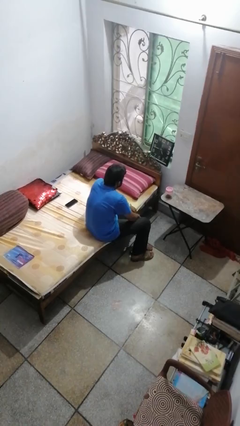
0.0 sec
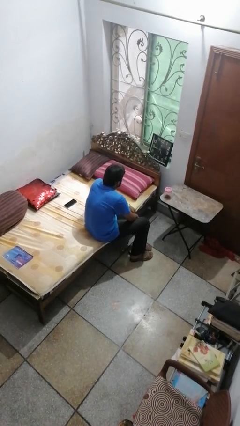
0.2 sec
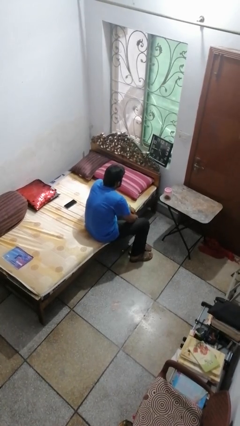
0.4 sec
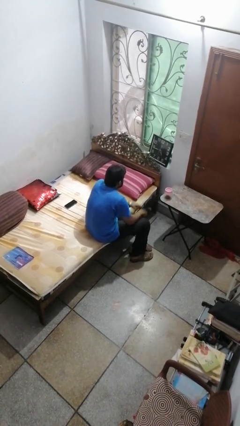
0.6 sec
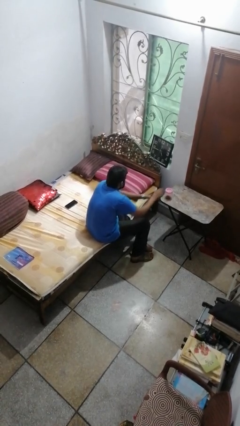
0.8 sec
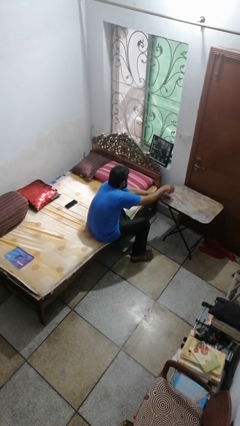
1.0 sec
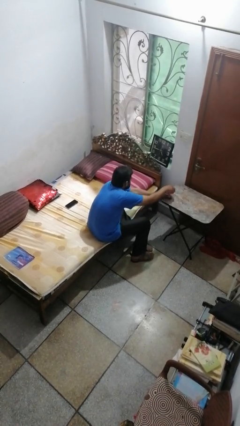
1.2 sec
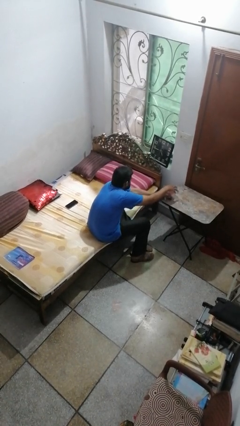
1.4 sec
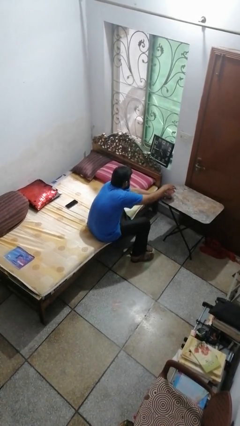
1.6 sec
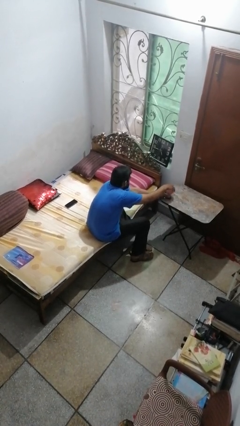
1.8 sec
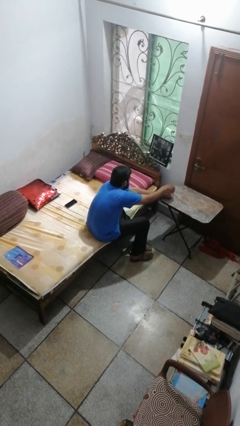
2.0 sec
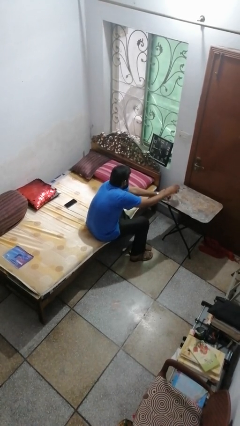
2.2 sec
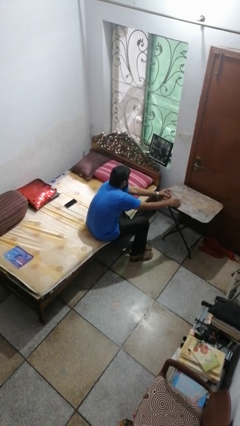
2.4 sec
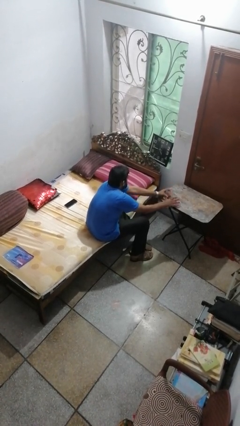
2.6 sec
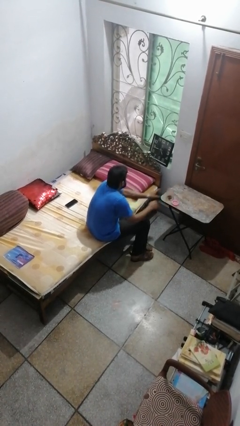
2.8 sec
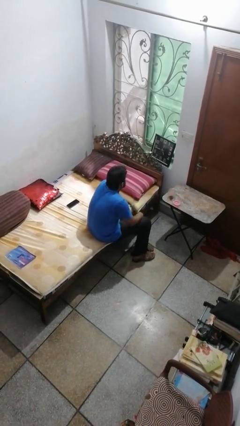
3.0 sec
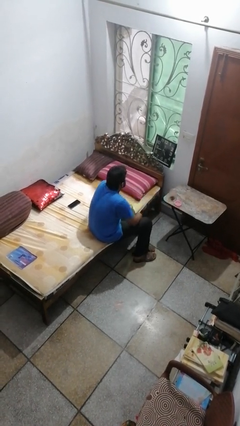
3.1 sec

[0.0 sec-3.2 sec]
person opens jar

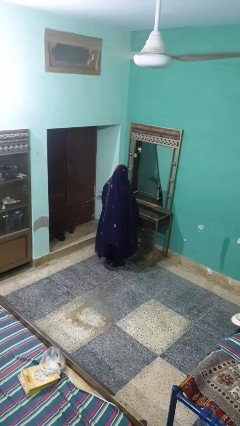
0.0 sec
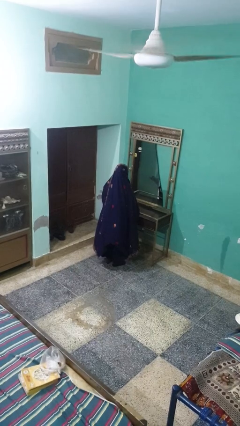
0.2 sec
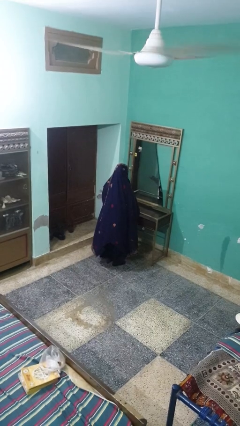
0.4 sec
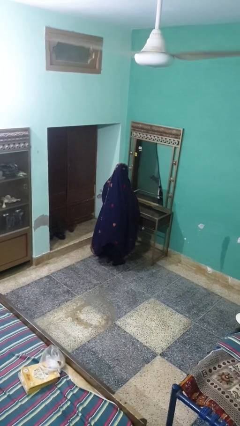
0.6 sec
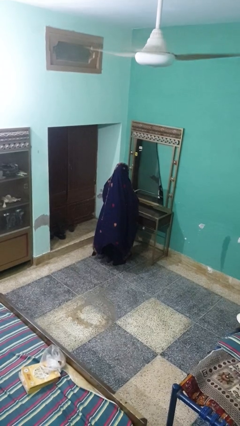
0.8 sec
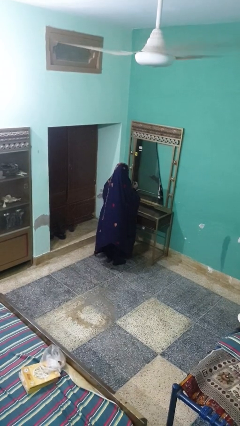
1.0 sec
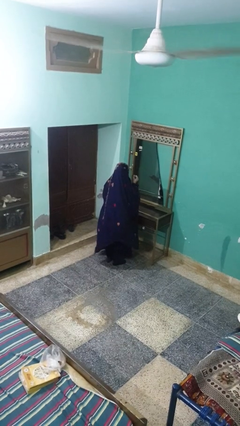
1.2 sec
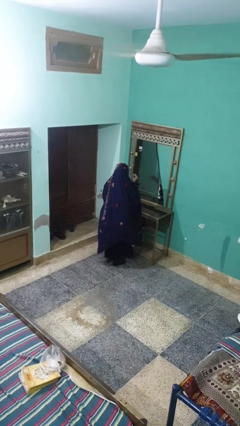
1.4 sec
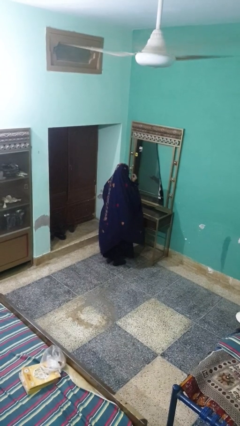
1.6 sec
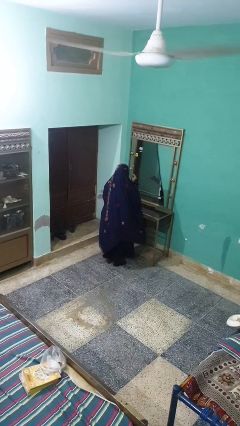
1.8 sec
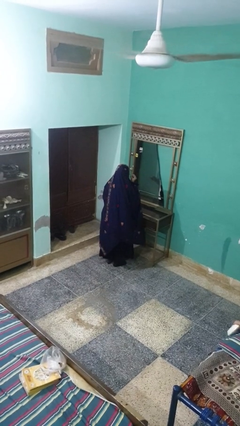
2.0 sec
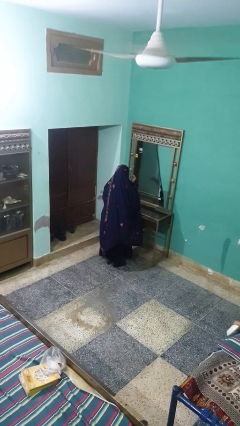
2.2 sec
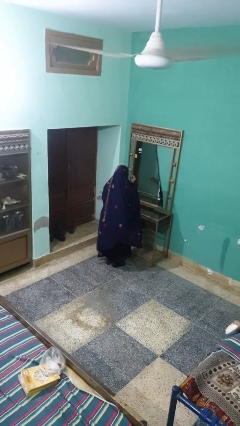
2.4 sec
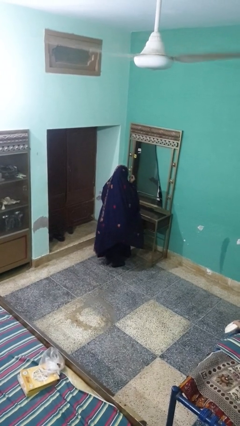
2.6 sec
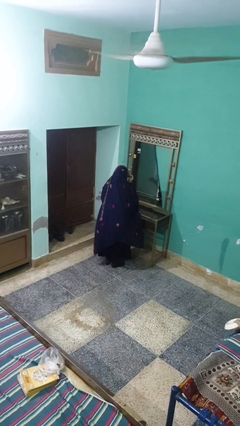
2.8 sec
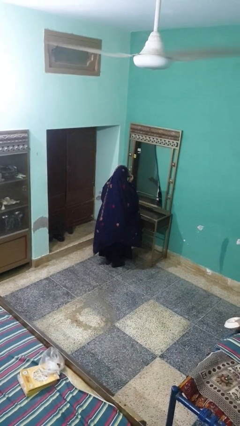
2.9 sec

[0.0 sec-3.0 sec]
person applies eye makeup

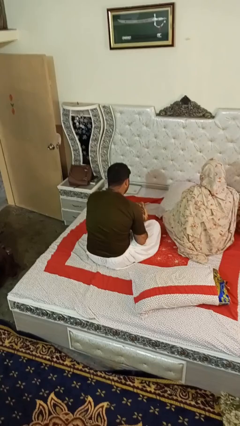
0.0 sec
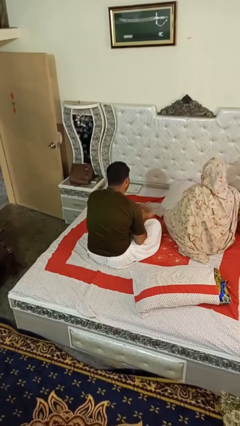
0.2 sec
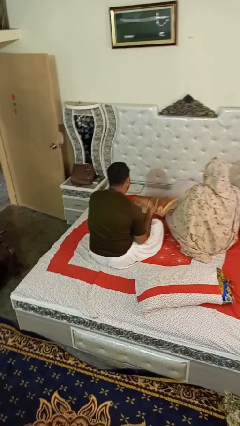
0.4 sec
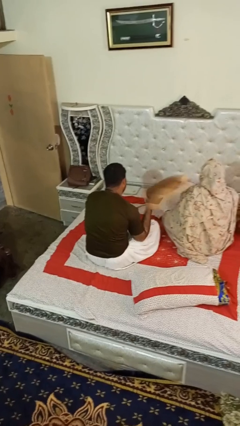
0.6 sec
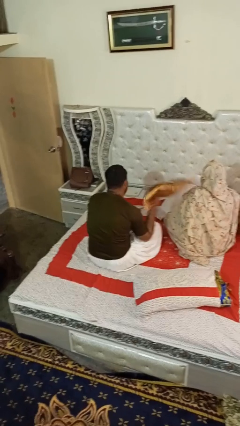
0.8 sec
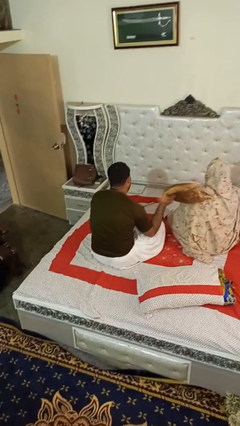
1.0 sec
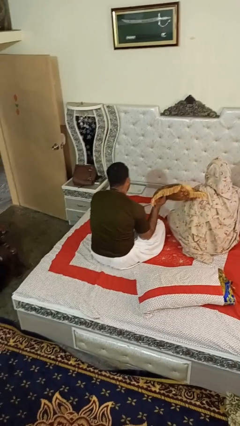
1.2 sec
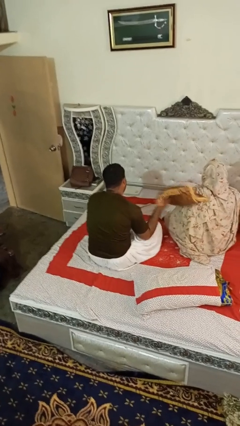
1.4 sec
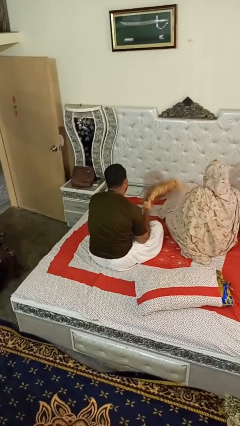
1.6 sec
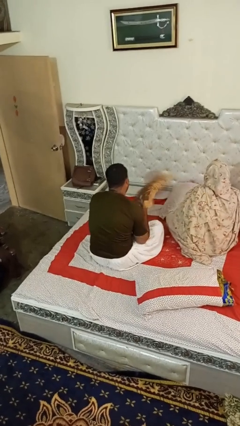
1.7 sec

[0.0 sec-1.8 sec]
person hits person with pillow

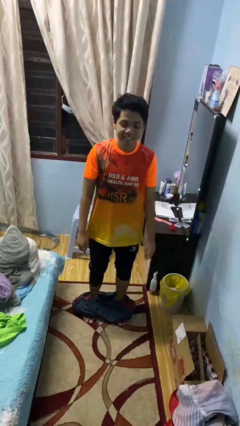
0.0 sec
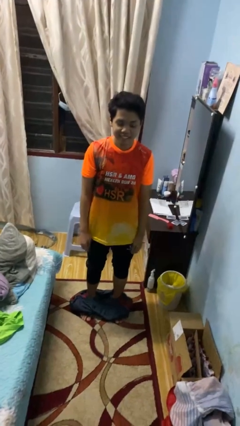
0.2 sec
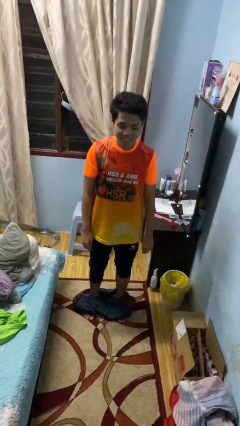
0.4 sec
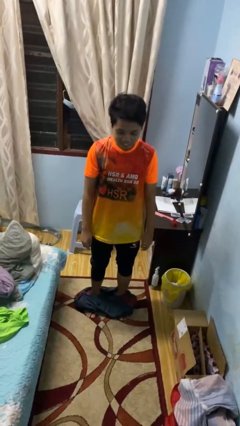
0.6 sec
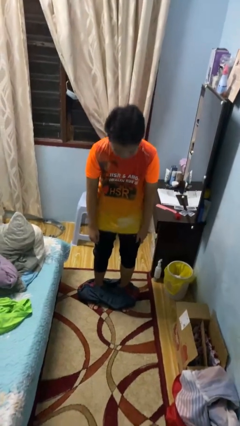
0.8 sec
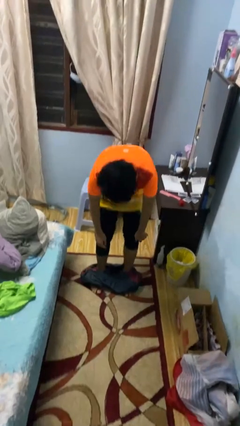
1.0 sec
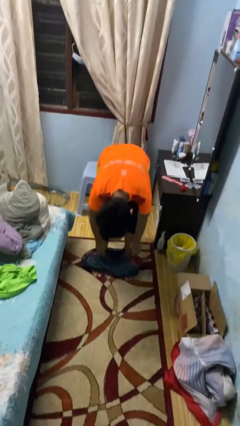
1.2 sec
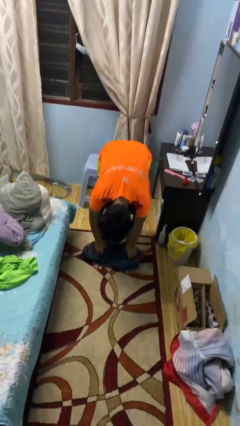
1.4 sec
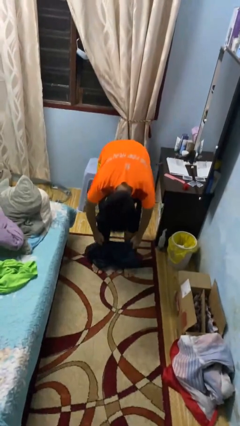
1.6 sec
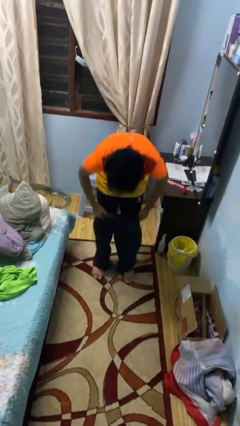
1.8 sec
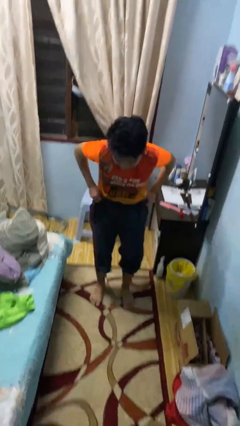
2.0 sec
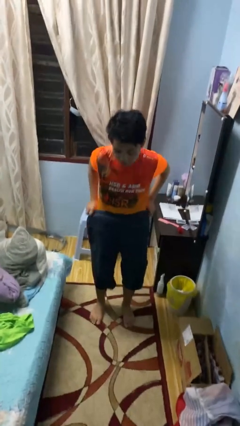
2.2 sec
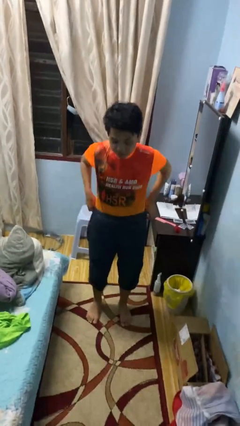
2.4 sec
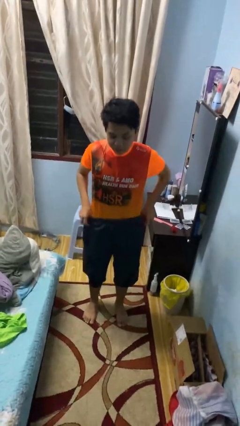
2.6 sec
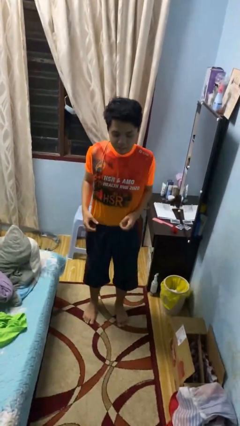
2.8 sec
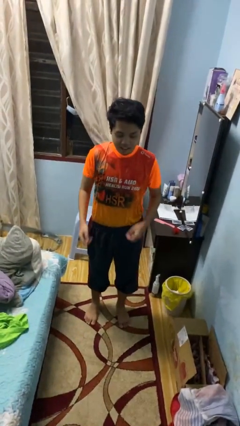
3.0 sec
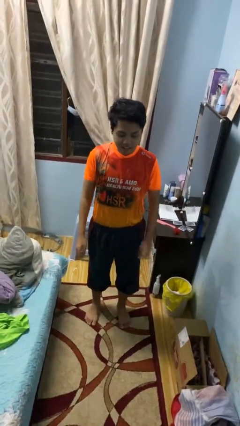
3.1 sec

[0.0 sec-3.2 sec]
person puts on pants

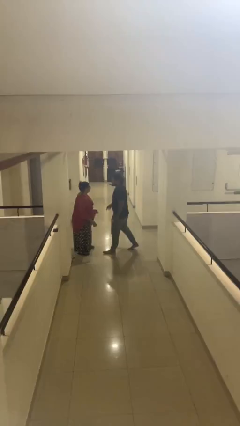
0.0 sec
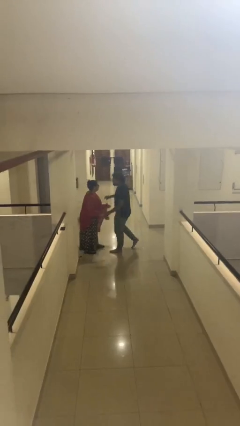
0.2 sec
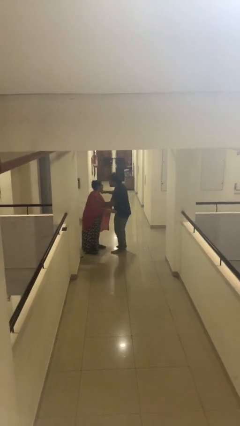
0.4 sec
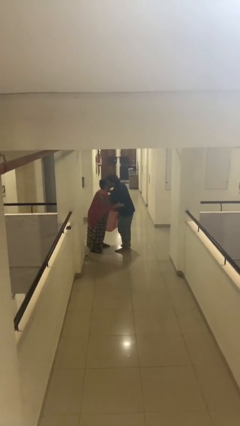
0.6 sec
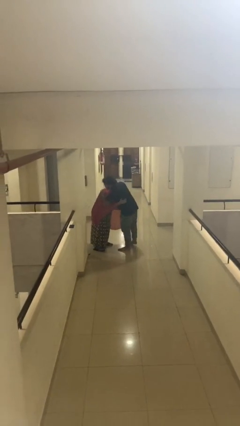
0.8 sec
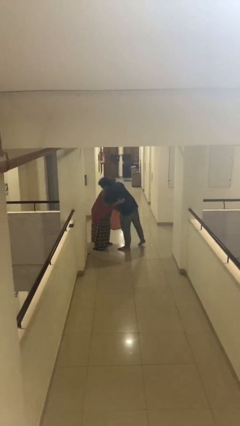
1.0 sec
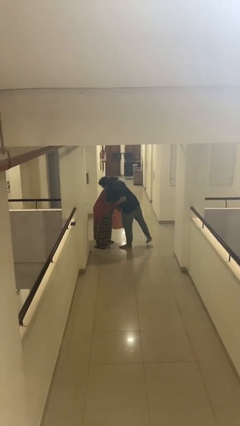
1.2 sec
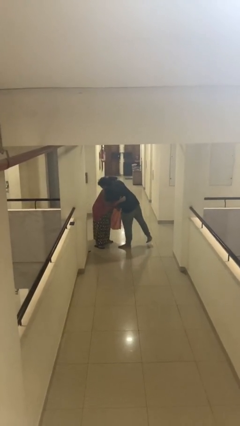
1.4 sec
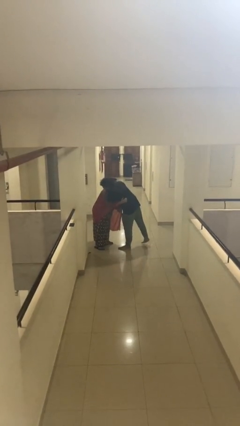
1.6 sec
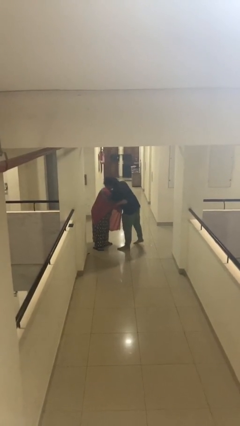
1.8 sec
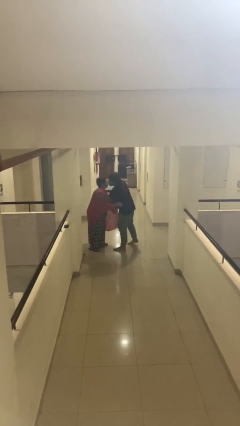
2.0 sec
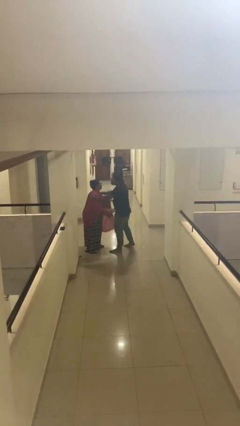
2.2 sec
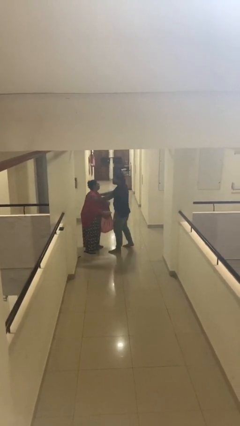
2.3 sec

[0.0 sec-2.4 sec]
person embraces person

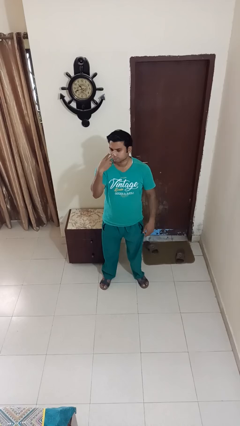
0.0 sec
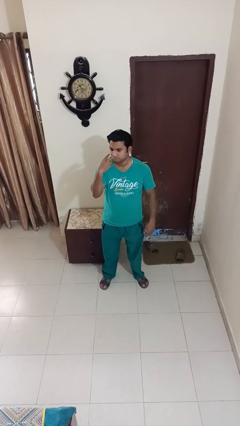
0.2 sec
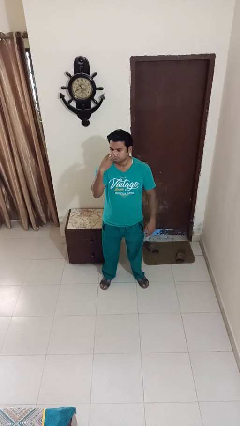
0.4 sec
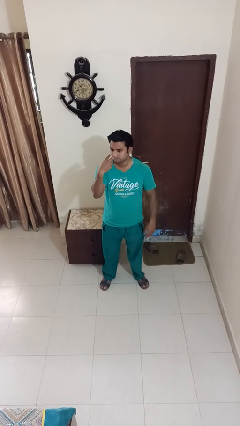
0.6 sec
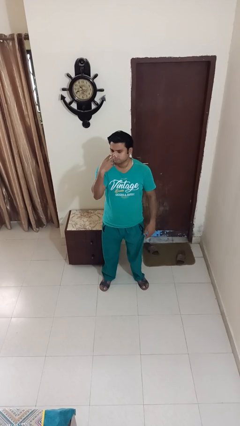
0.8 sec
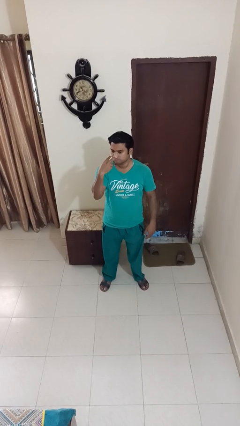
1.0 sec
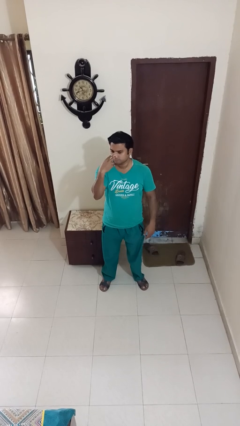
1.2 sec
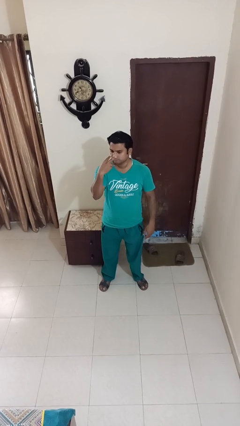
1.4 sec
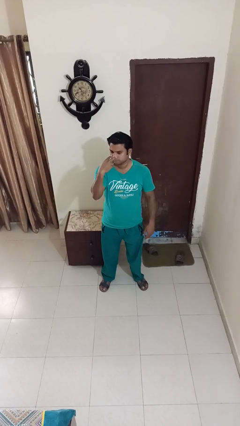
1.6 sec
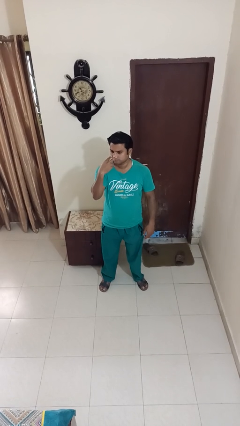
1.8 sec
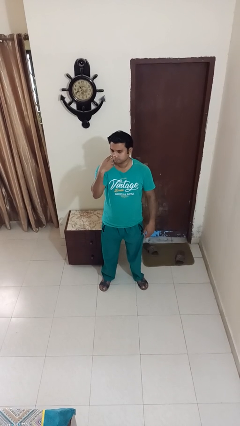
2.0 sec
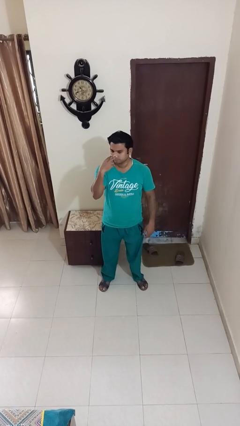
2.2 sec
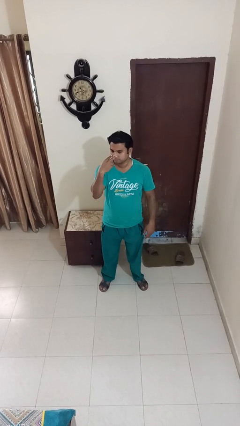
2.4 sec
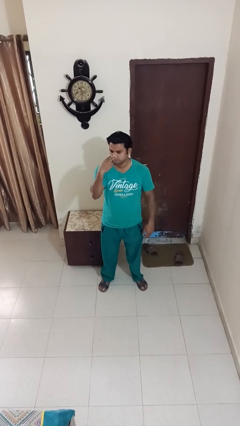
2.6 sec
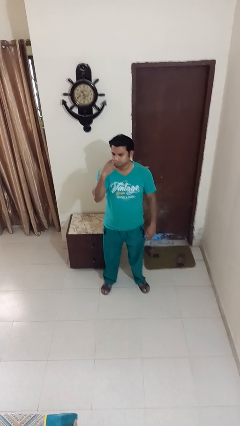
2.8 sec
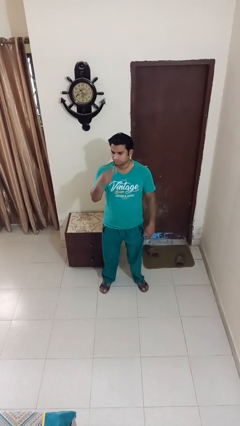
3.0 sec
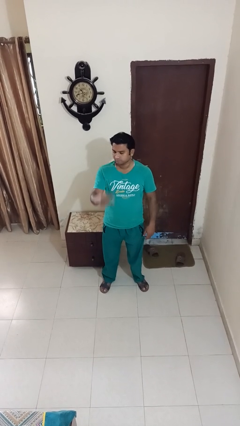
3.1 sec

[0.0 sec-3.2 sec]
person gestures watch closely

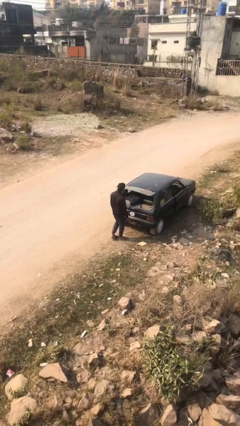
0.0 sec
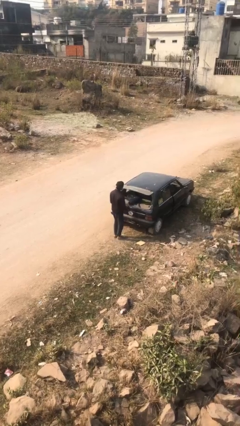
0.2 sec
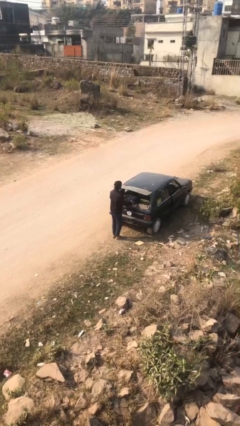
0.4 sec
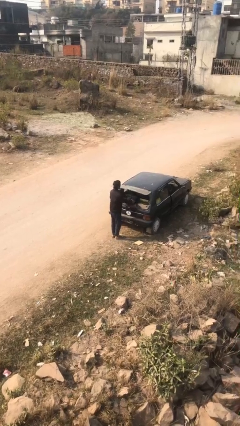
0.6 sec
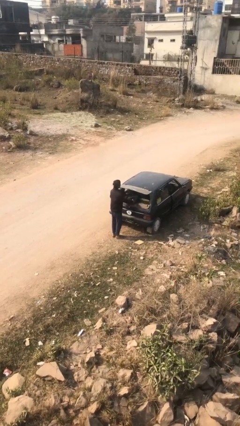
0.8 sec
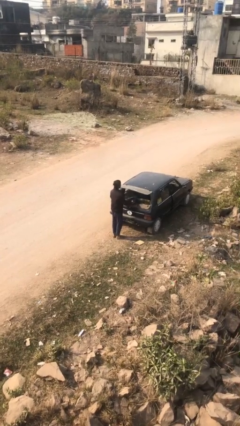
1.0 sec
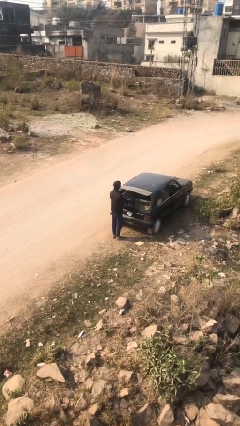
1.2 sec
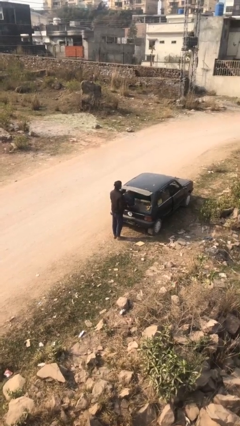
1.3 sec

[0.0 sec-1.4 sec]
person unloads car
